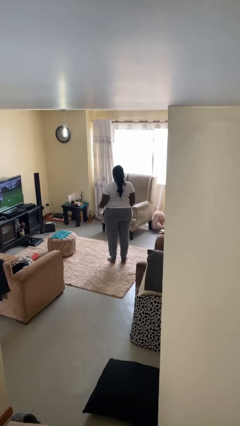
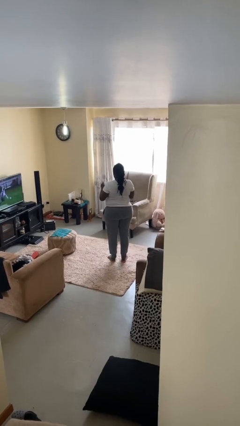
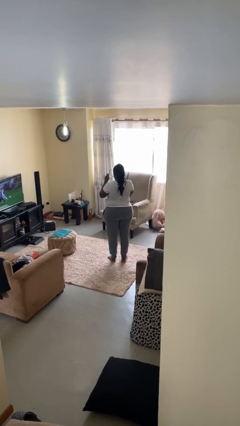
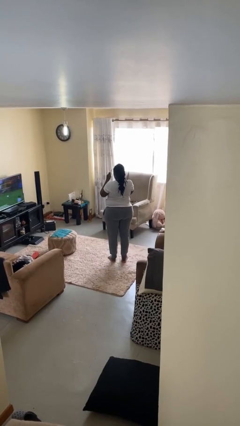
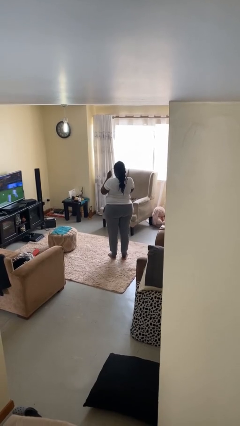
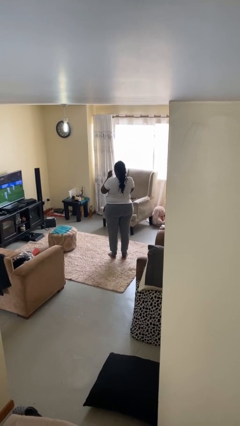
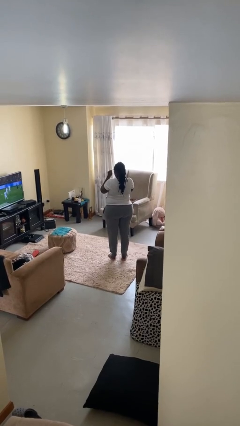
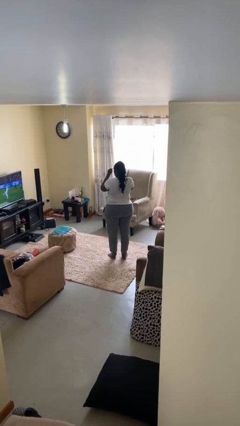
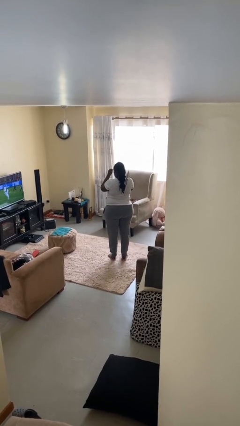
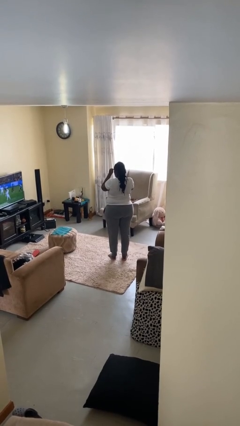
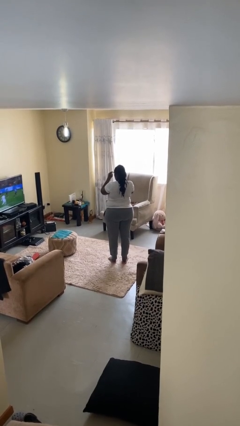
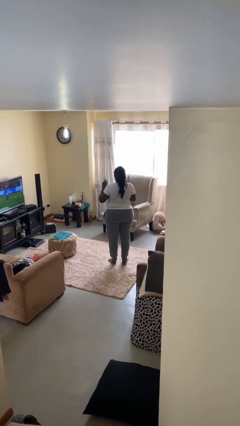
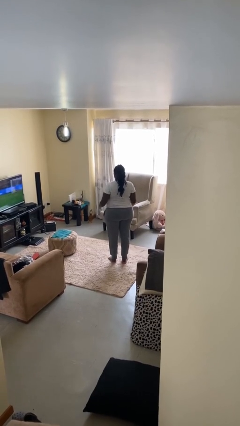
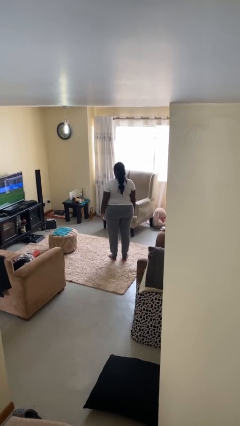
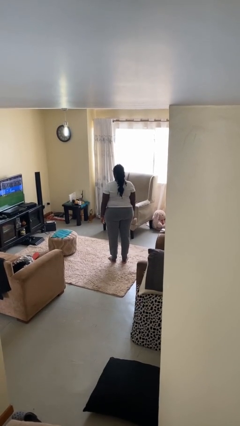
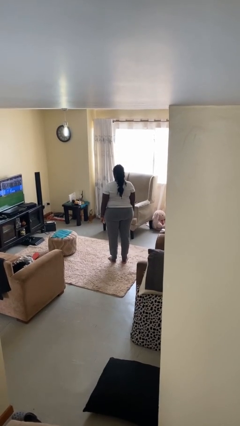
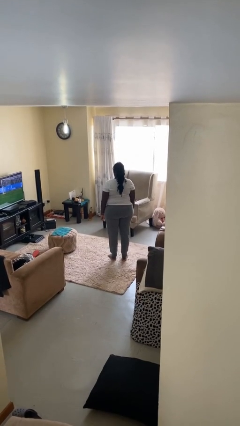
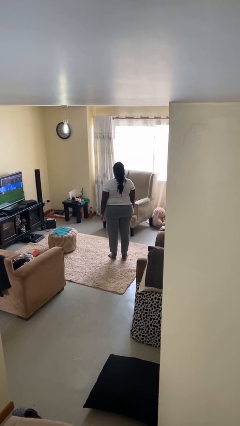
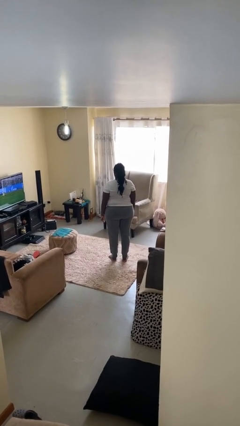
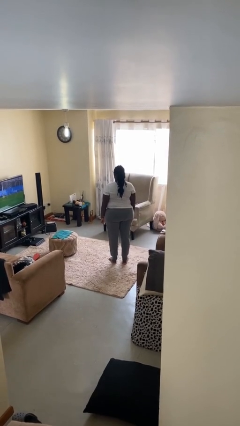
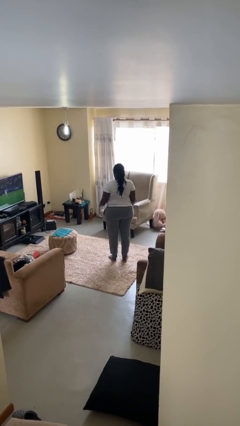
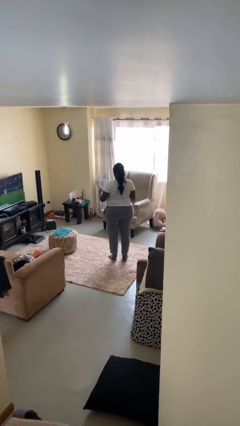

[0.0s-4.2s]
person puts on glasses

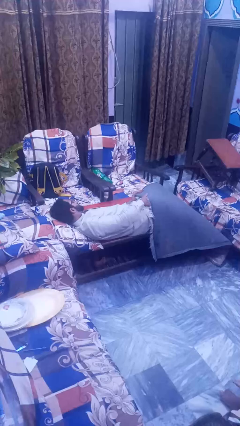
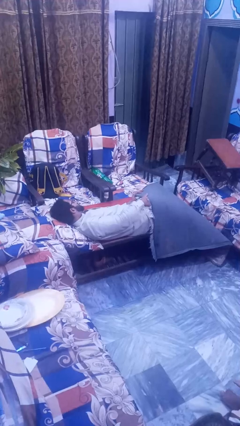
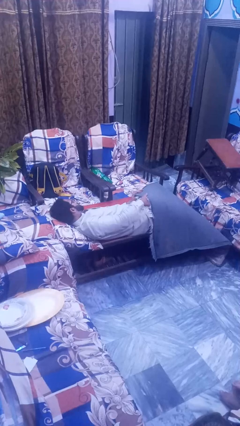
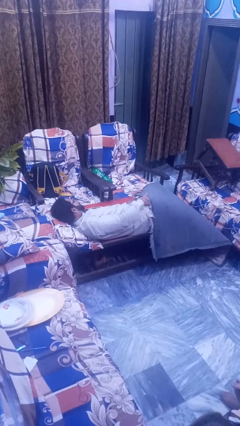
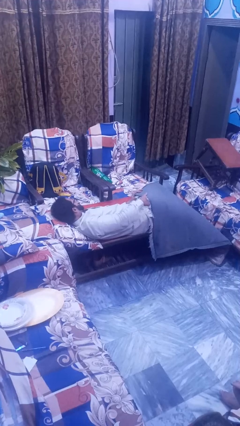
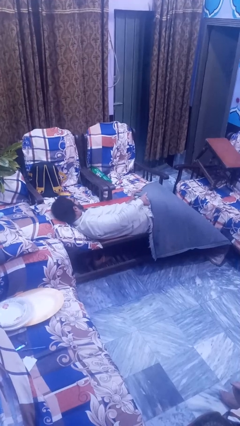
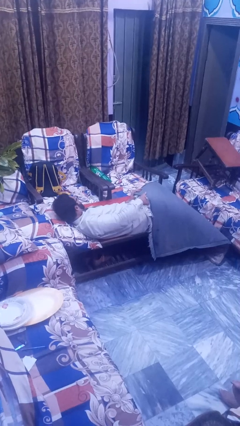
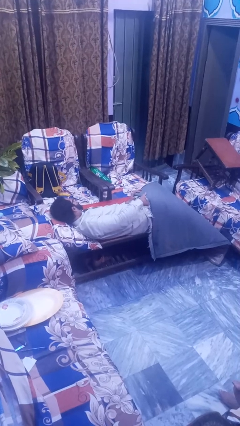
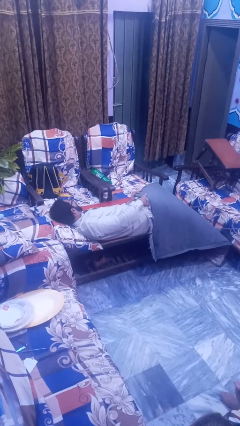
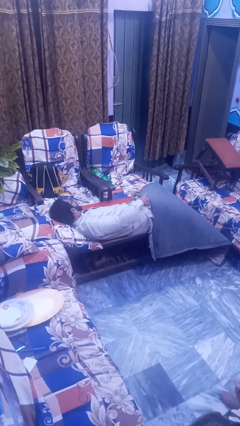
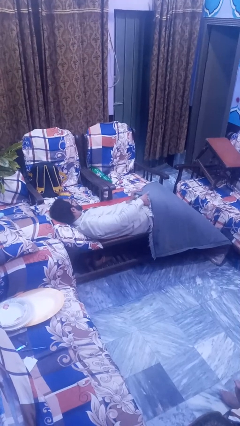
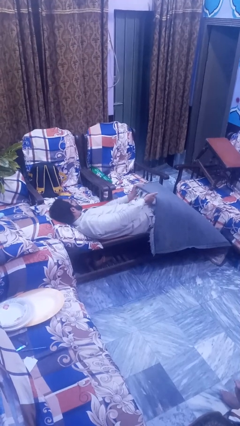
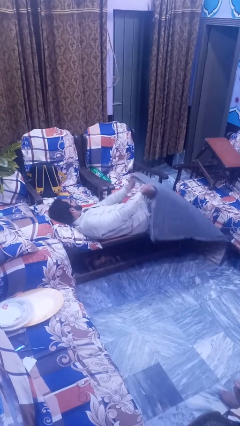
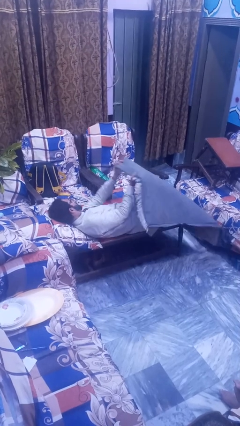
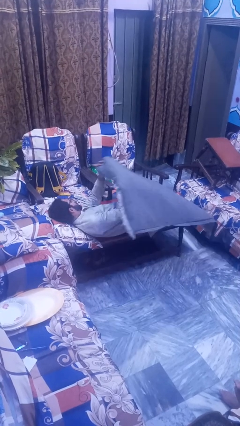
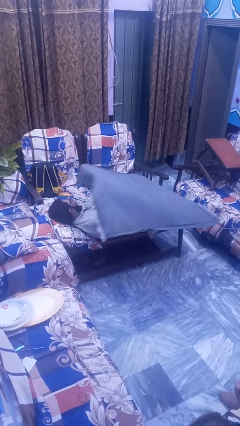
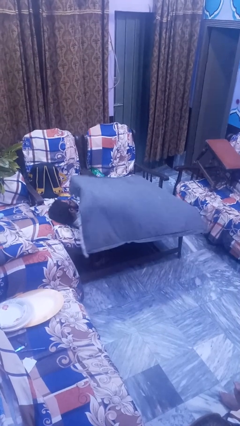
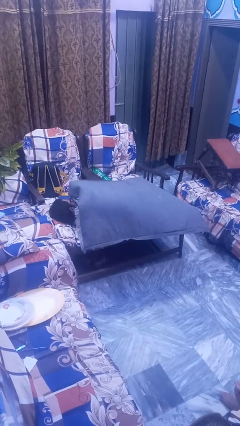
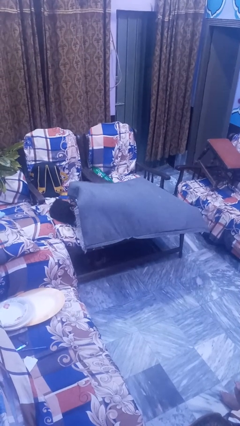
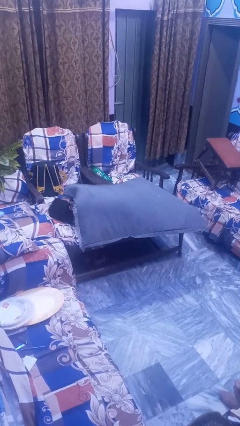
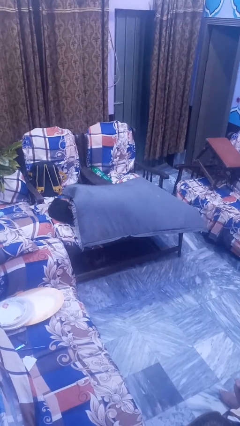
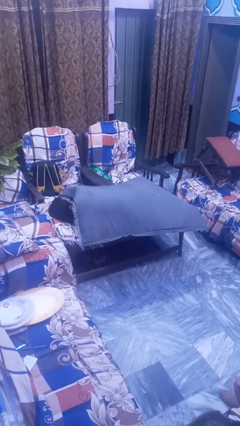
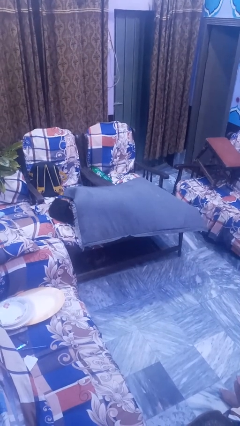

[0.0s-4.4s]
person covers with blanket

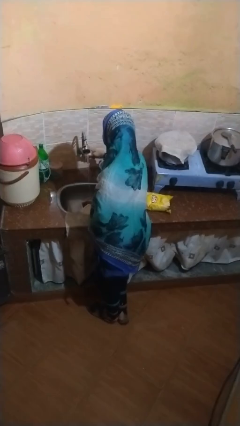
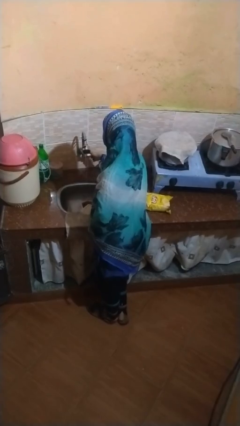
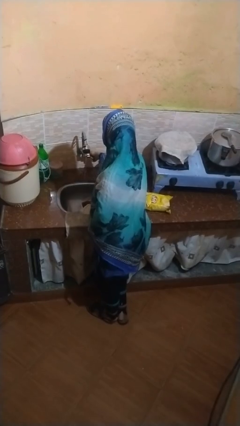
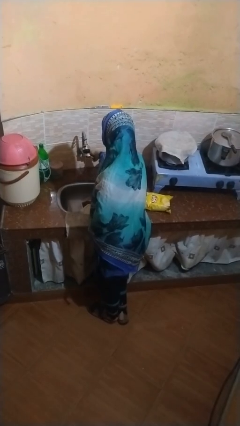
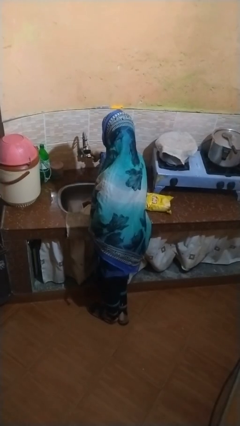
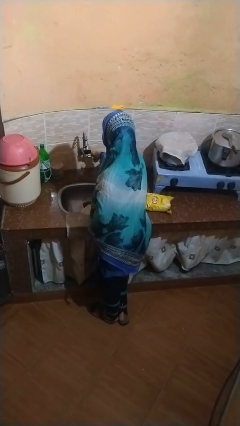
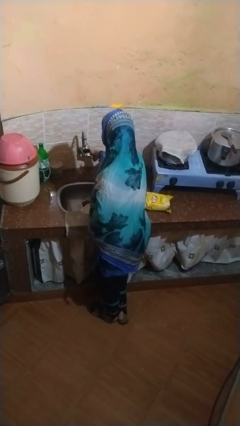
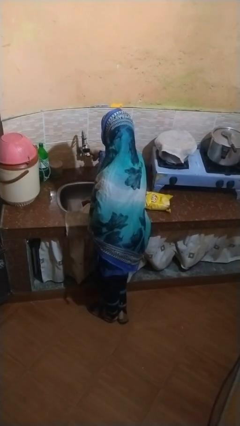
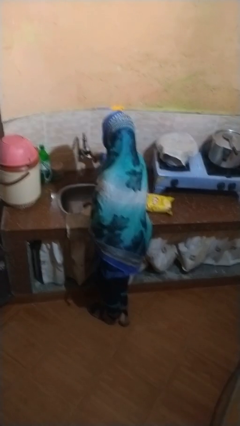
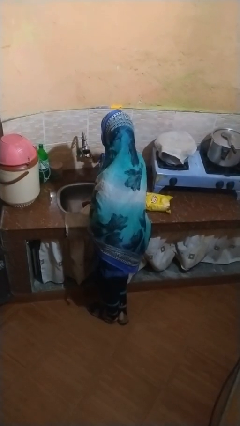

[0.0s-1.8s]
person turns off faucet

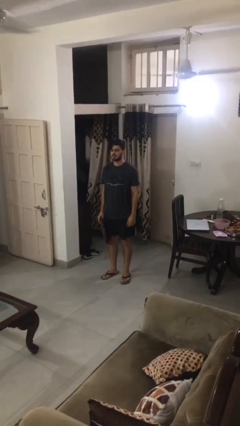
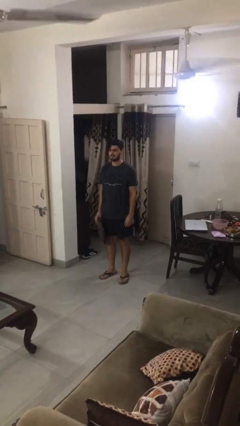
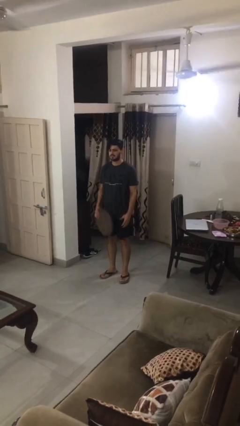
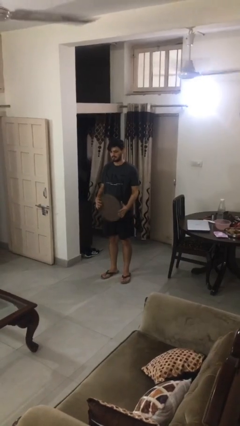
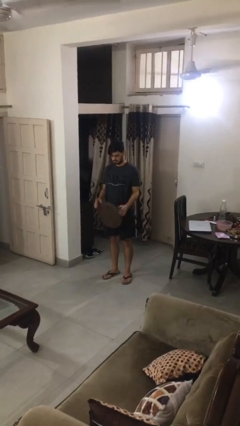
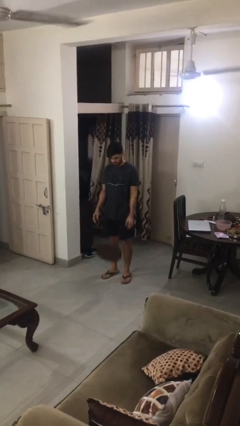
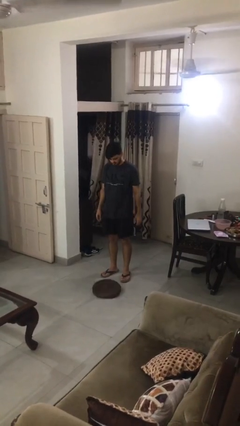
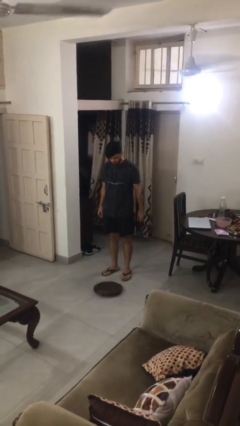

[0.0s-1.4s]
person drops object

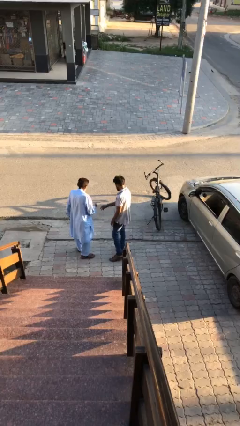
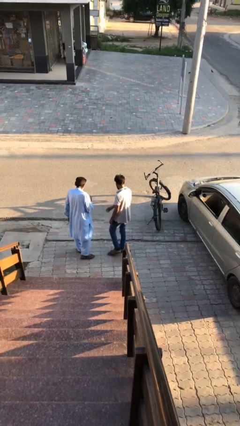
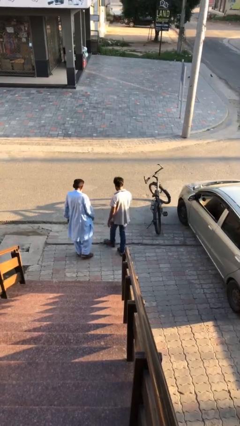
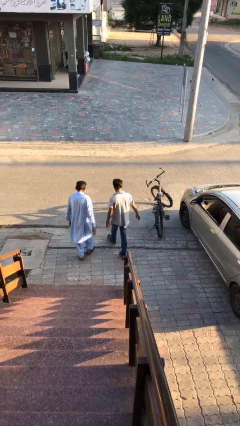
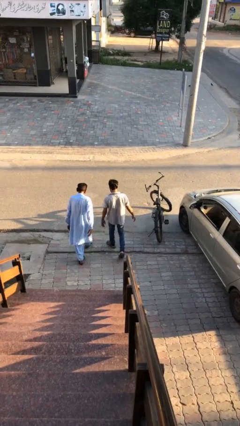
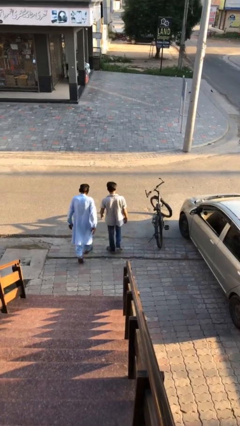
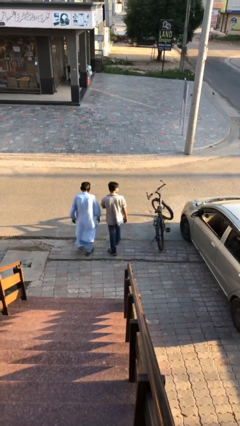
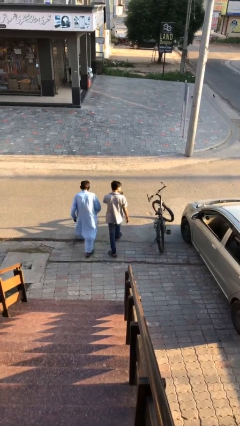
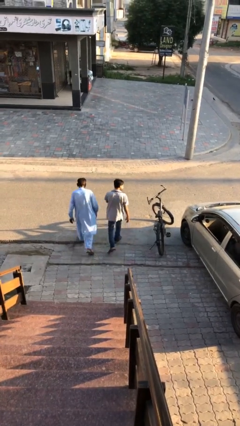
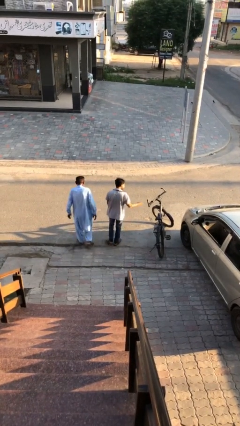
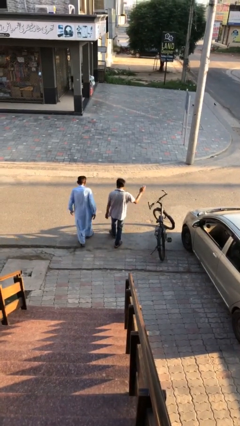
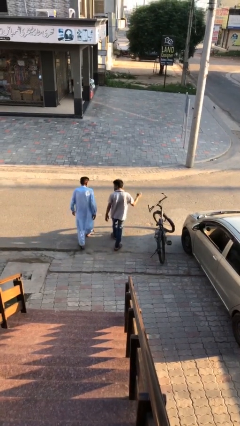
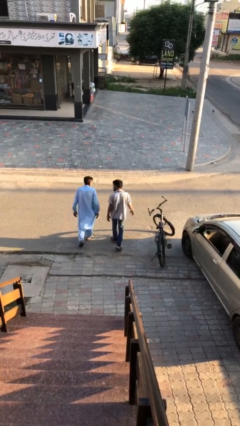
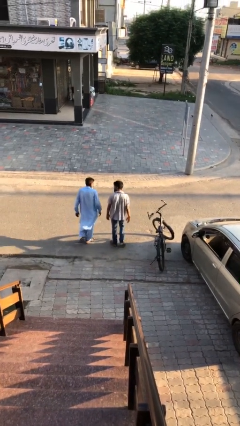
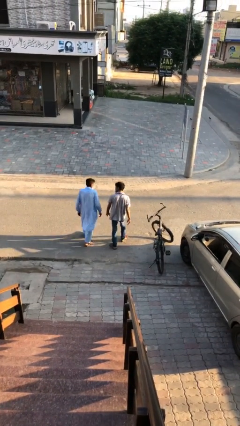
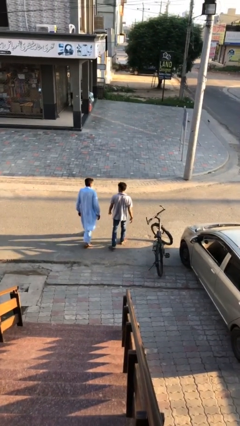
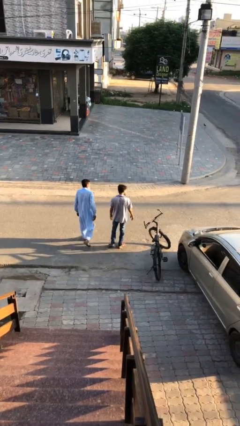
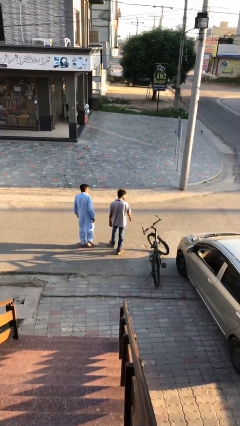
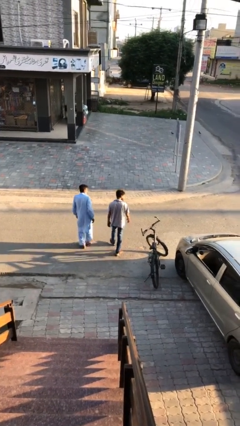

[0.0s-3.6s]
person talks to person

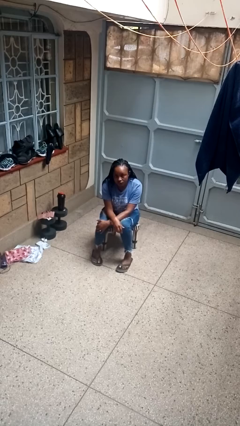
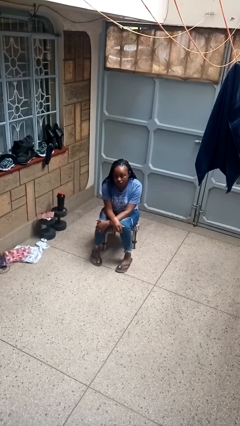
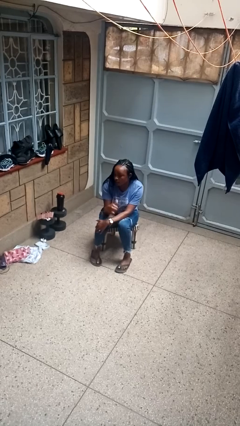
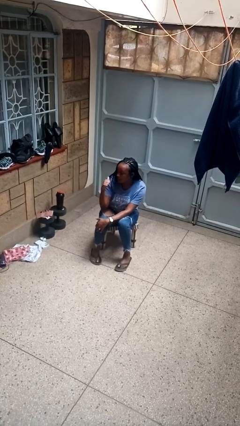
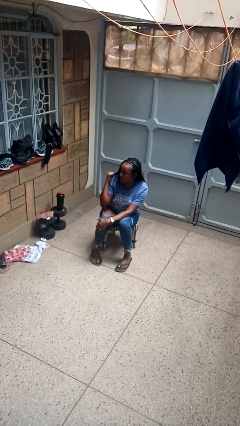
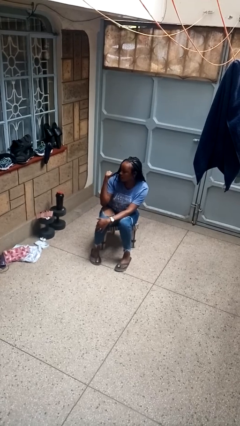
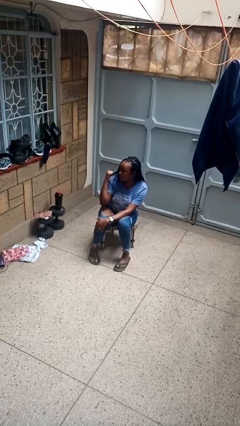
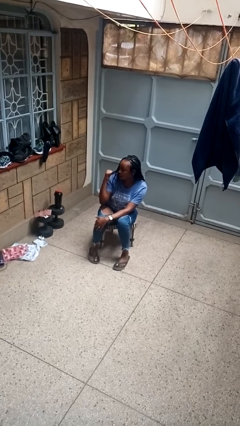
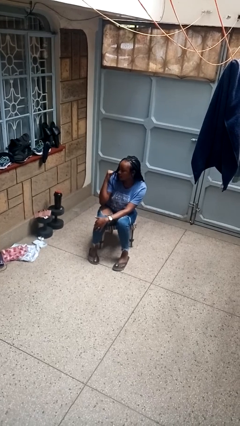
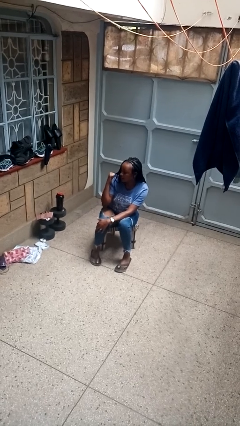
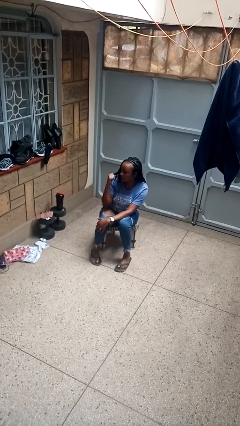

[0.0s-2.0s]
person gestures behind me
